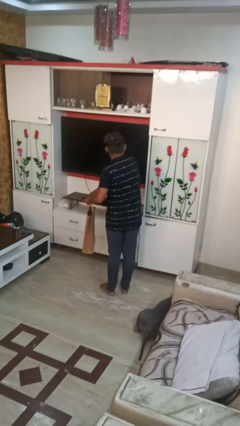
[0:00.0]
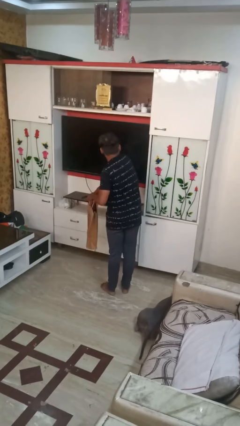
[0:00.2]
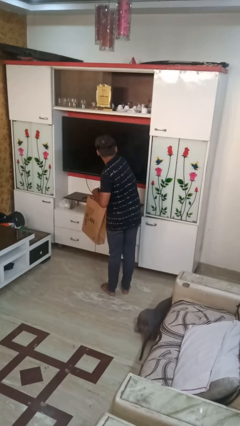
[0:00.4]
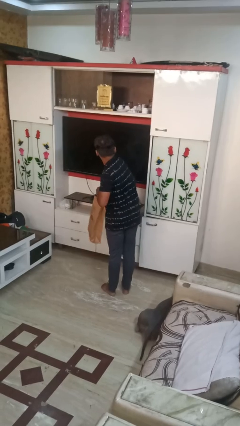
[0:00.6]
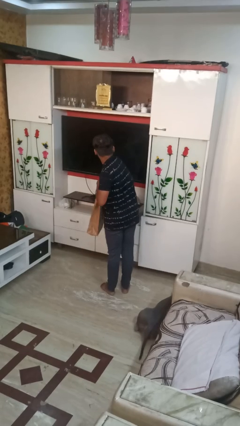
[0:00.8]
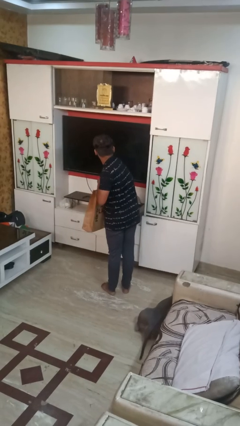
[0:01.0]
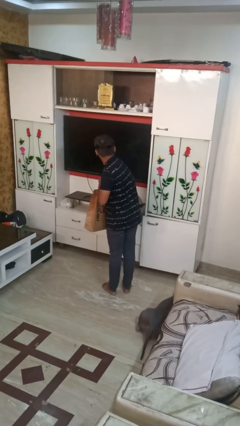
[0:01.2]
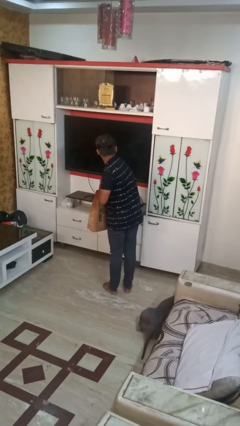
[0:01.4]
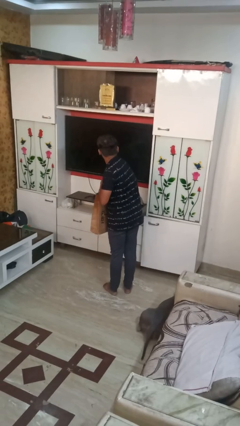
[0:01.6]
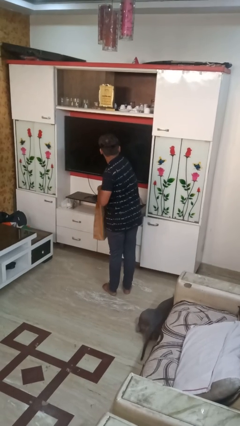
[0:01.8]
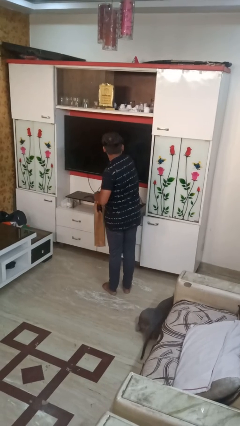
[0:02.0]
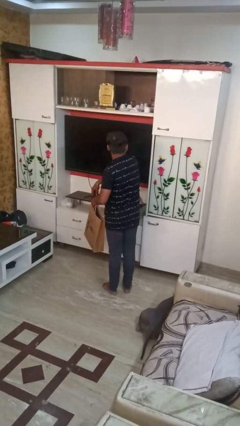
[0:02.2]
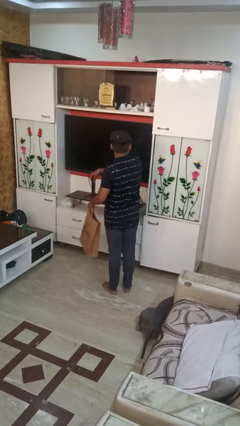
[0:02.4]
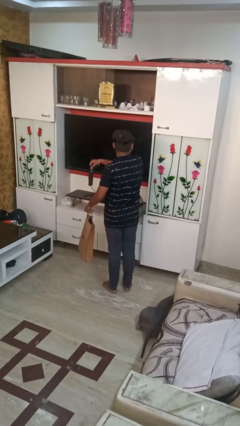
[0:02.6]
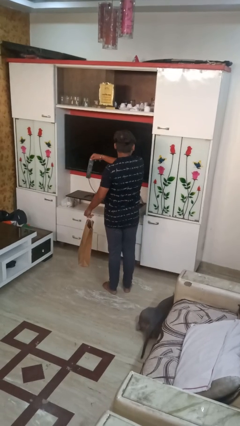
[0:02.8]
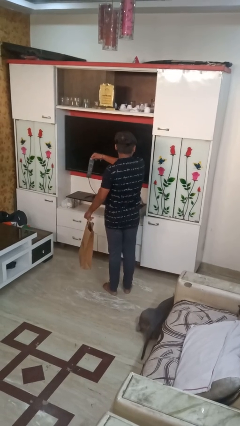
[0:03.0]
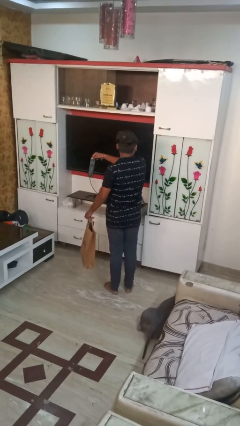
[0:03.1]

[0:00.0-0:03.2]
person takes object from bag

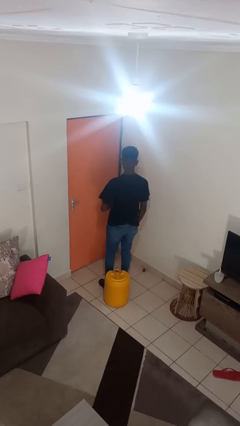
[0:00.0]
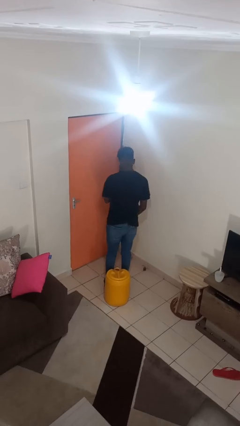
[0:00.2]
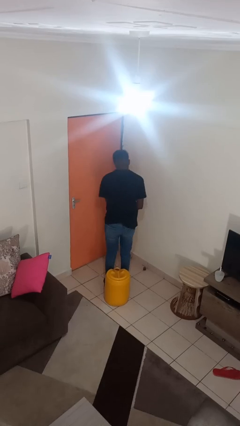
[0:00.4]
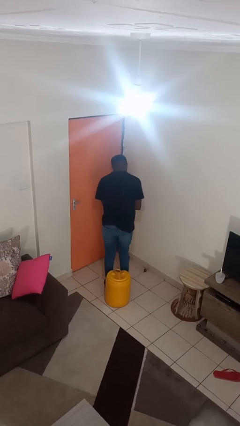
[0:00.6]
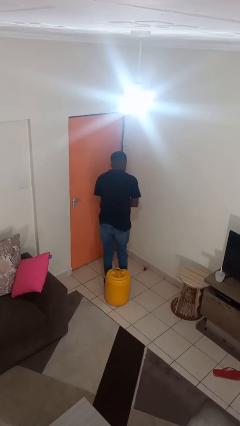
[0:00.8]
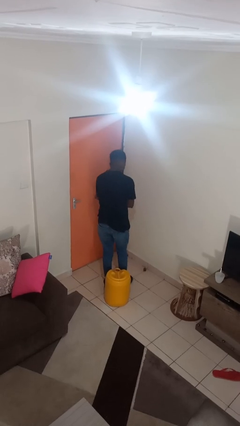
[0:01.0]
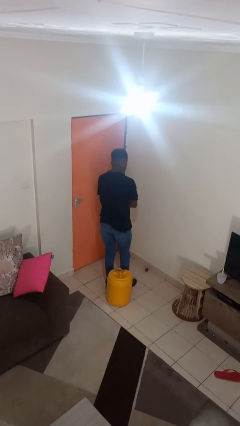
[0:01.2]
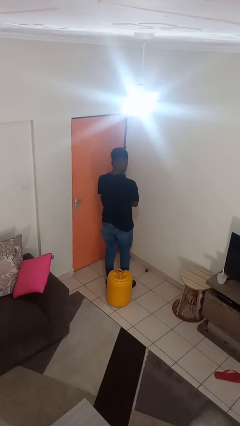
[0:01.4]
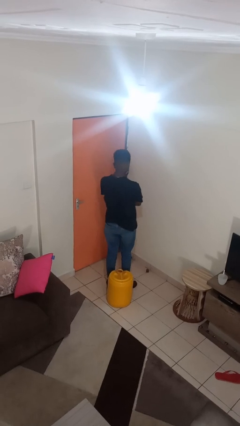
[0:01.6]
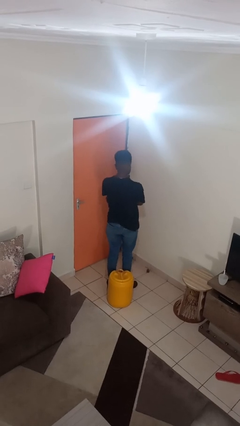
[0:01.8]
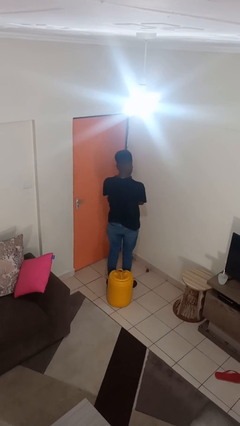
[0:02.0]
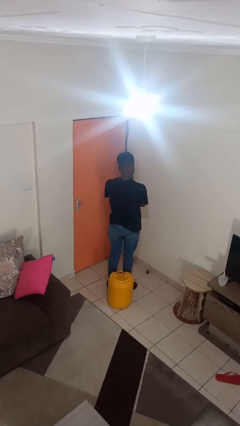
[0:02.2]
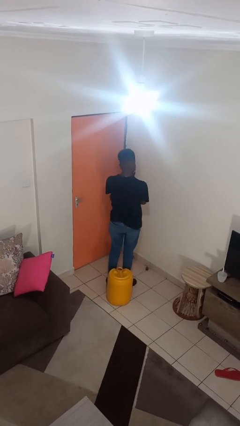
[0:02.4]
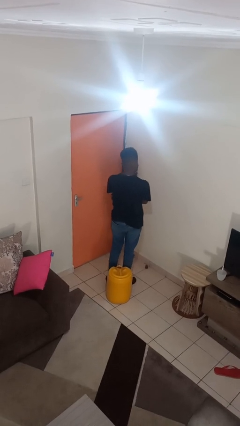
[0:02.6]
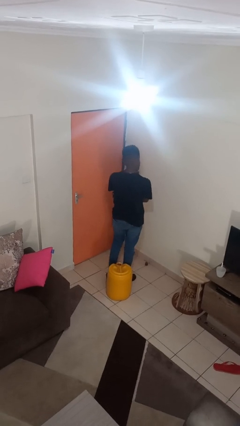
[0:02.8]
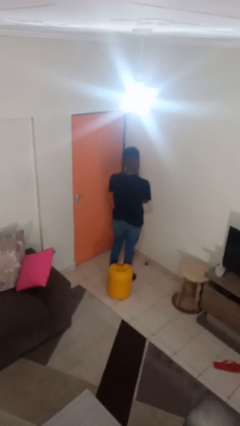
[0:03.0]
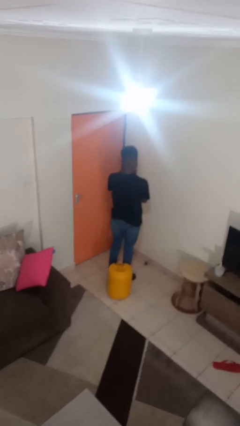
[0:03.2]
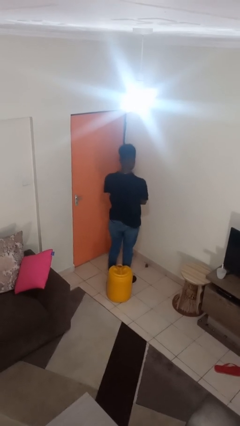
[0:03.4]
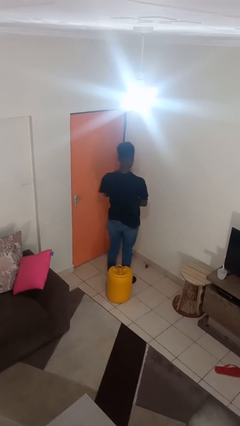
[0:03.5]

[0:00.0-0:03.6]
person strokes chin

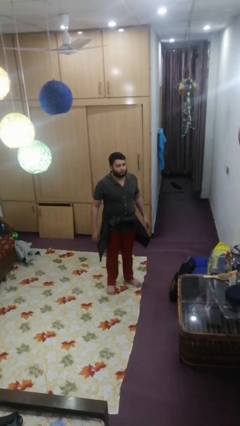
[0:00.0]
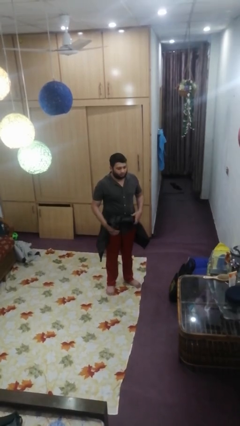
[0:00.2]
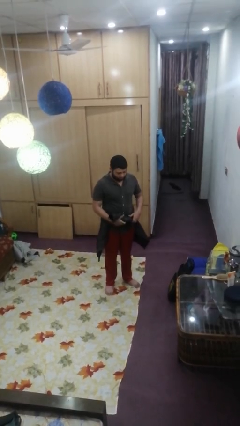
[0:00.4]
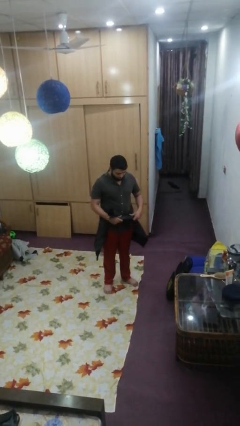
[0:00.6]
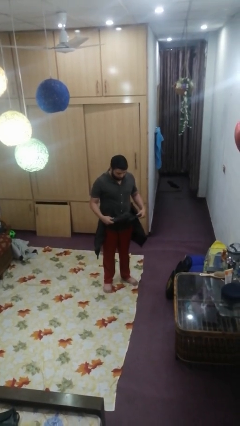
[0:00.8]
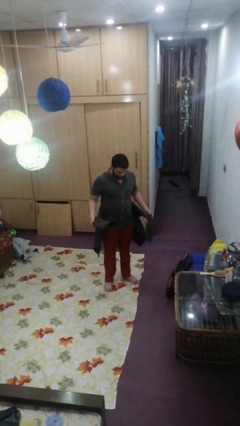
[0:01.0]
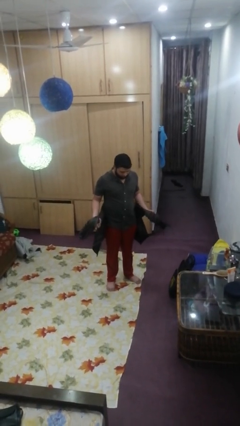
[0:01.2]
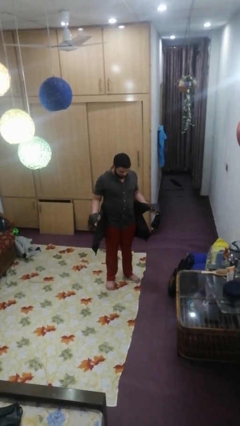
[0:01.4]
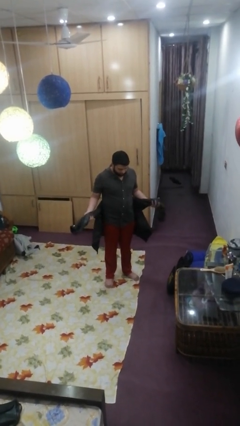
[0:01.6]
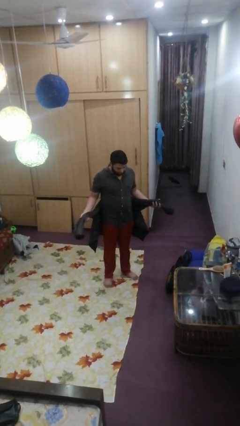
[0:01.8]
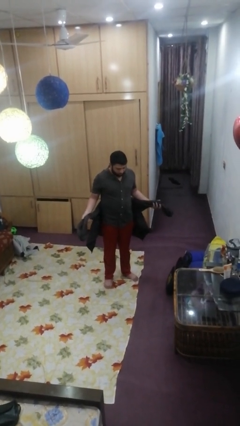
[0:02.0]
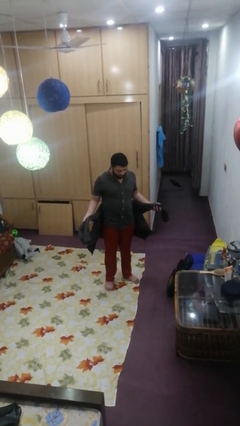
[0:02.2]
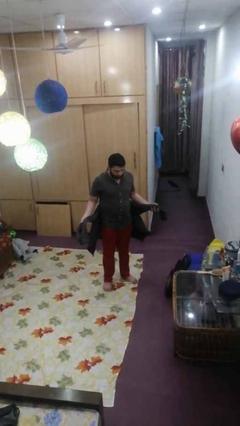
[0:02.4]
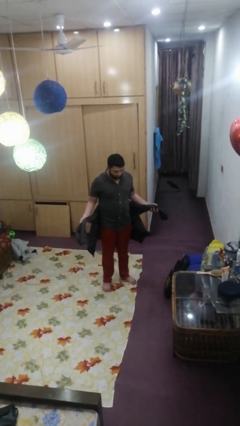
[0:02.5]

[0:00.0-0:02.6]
person unties jacket around waist

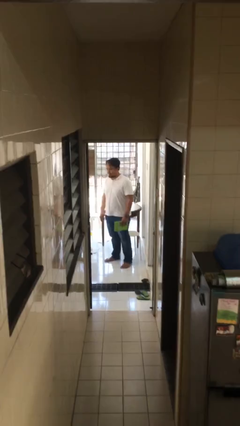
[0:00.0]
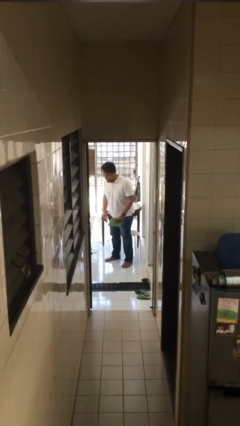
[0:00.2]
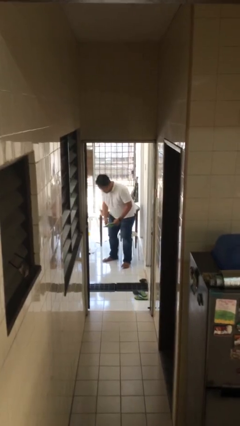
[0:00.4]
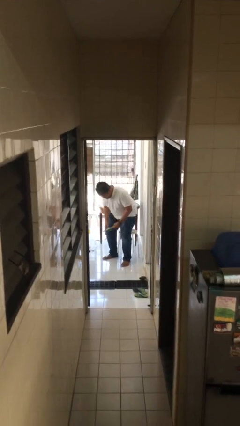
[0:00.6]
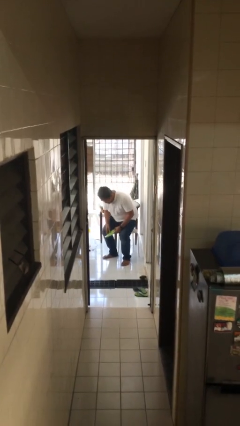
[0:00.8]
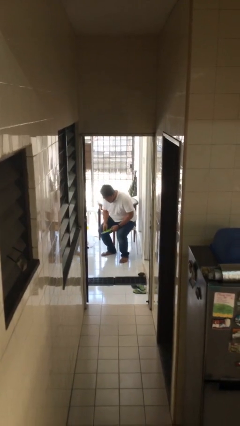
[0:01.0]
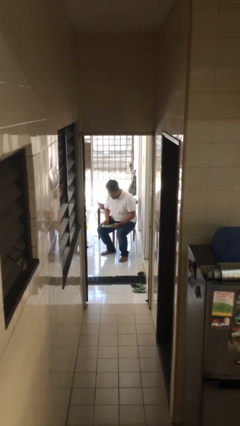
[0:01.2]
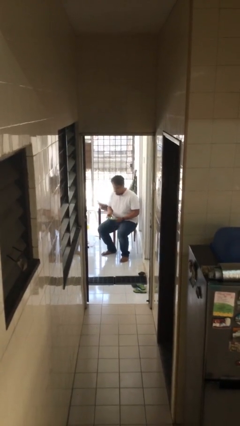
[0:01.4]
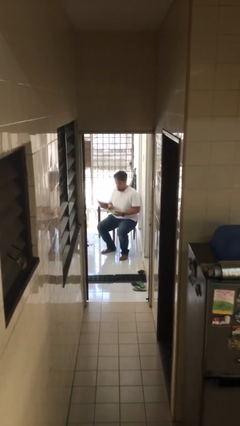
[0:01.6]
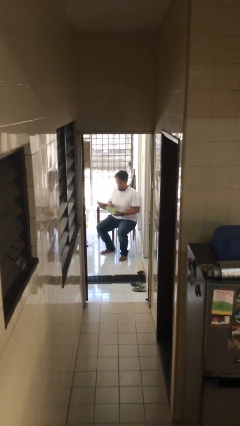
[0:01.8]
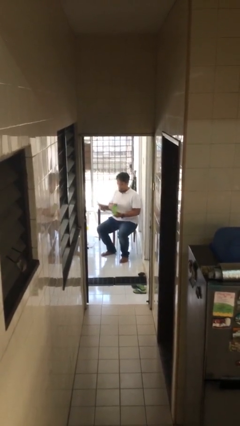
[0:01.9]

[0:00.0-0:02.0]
person sits down

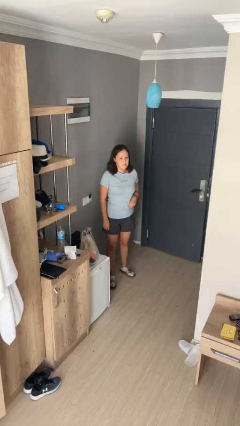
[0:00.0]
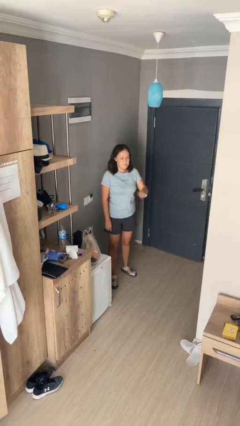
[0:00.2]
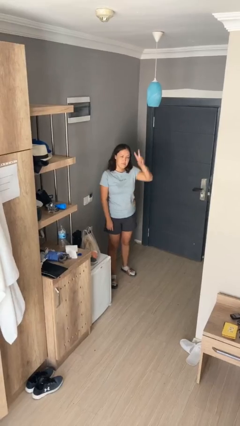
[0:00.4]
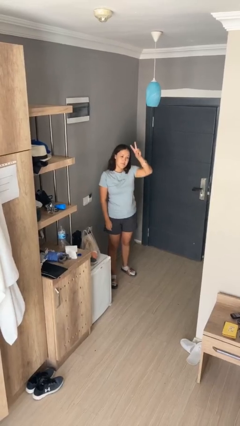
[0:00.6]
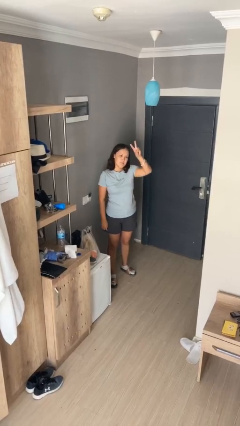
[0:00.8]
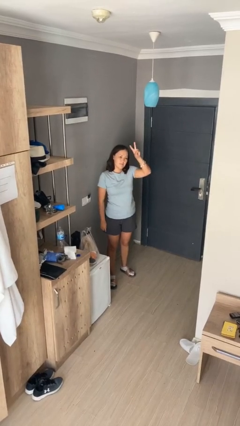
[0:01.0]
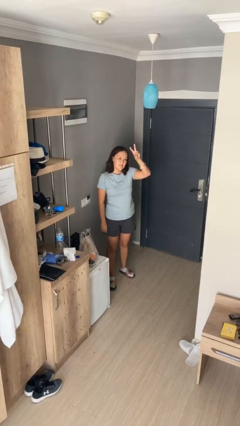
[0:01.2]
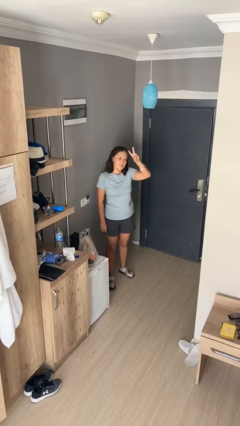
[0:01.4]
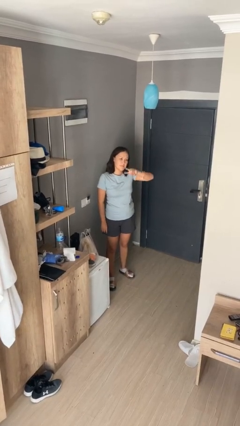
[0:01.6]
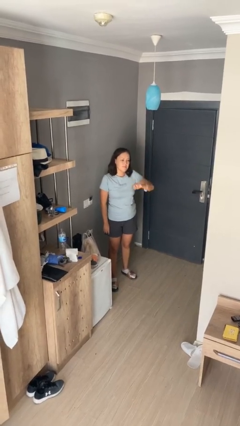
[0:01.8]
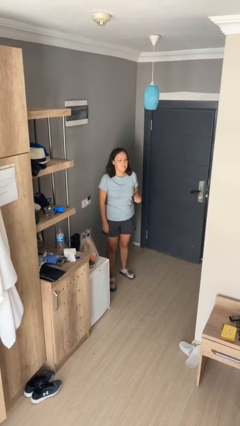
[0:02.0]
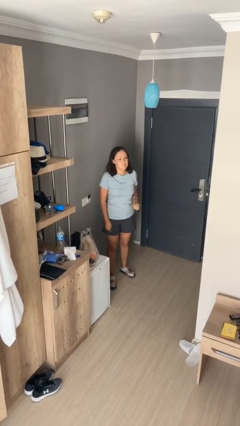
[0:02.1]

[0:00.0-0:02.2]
person gestures peace

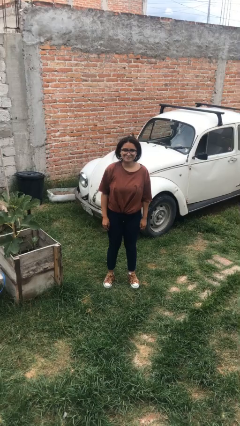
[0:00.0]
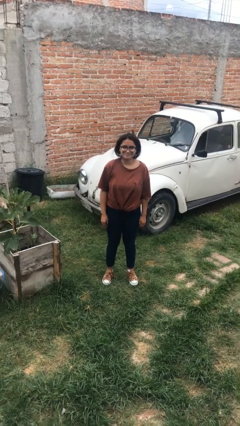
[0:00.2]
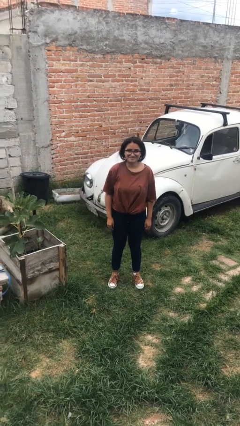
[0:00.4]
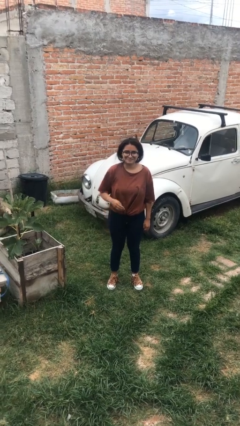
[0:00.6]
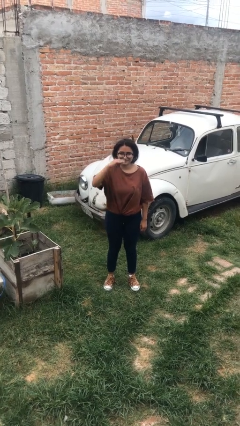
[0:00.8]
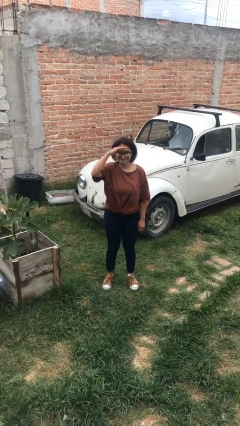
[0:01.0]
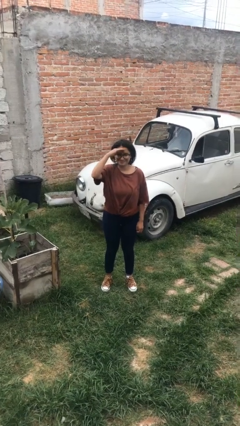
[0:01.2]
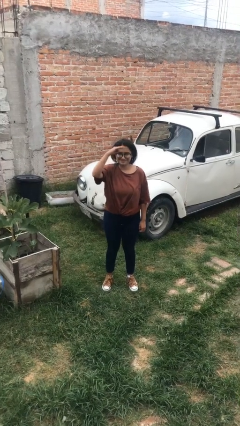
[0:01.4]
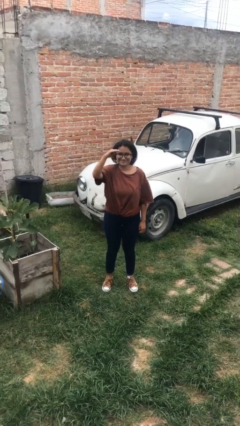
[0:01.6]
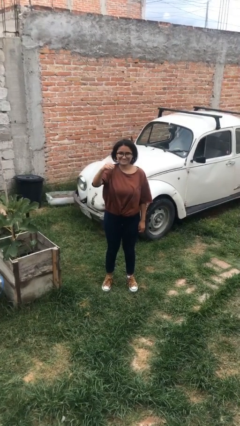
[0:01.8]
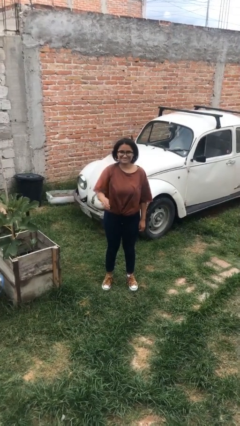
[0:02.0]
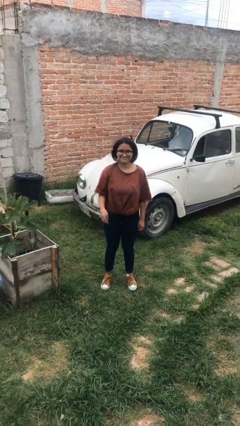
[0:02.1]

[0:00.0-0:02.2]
person salutes

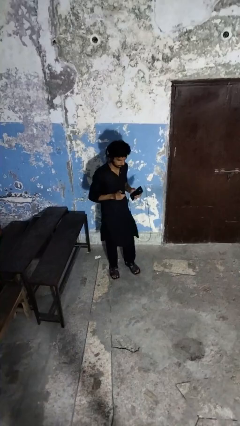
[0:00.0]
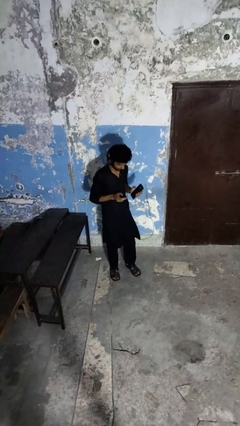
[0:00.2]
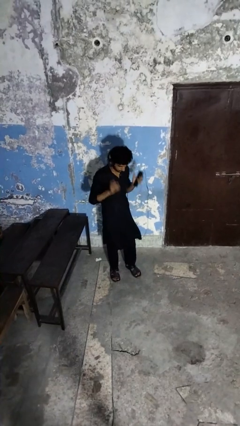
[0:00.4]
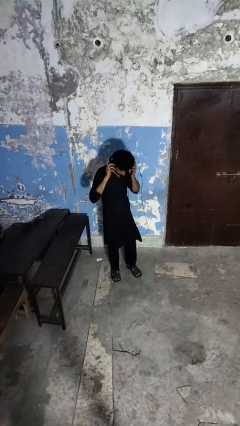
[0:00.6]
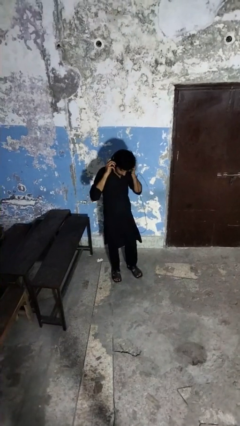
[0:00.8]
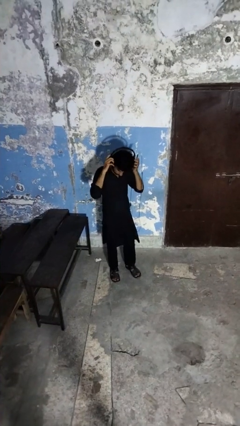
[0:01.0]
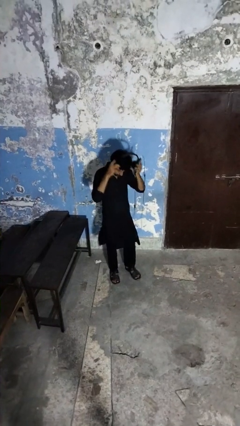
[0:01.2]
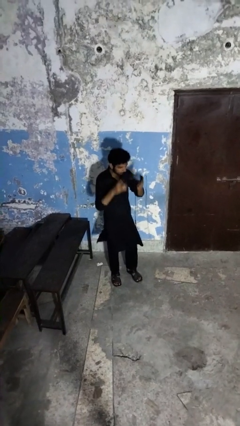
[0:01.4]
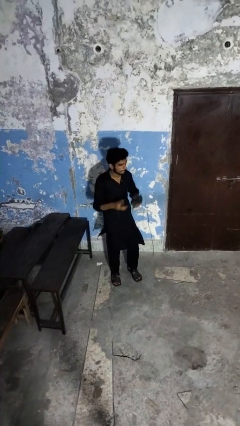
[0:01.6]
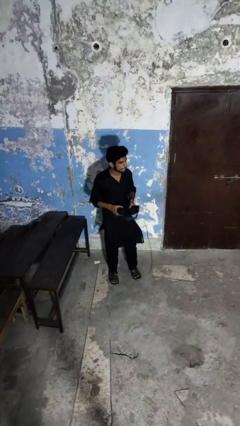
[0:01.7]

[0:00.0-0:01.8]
person takes off headphones
